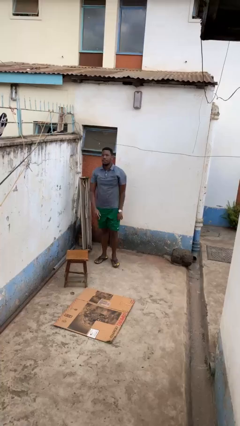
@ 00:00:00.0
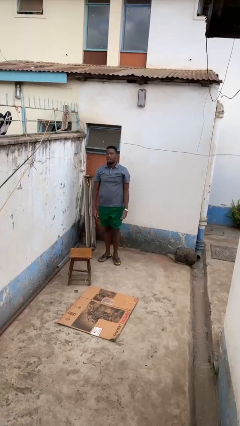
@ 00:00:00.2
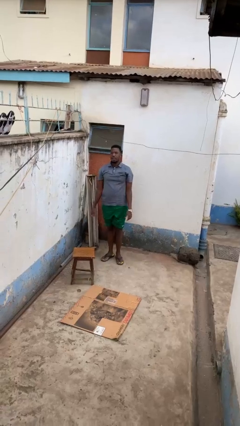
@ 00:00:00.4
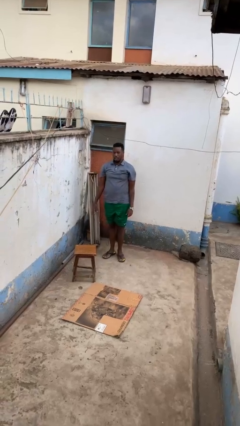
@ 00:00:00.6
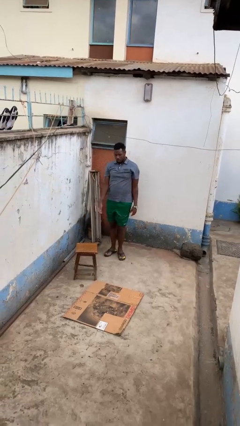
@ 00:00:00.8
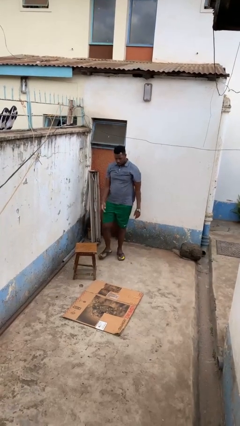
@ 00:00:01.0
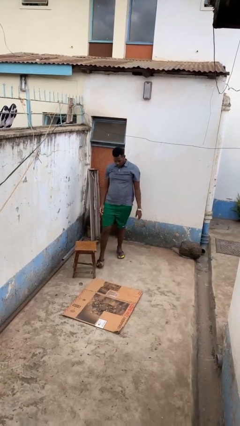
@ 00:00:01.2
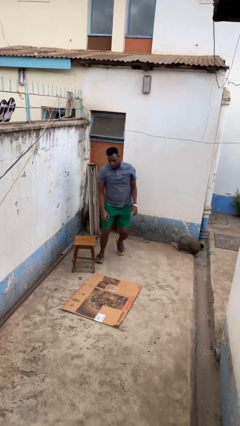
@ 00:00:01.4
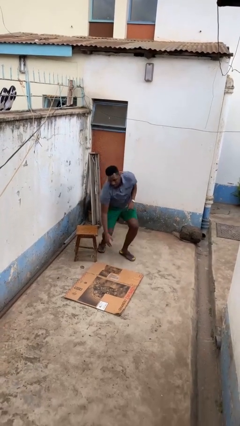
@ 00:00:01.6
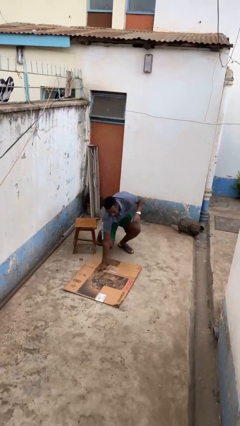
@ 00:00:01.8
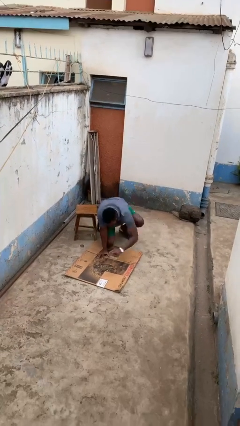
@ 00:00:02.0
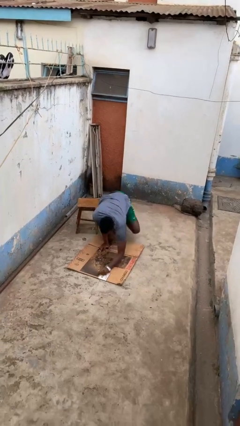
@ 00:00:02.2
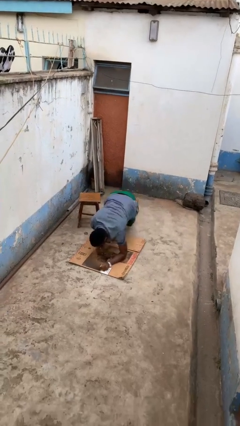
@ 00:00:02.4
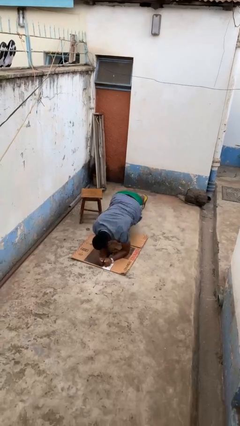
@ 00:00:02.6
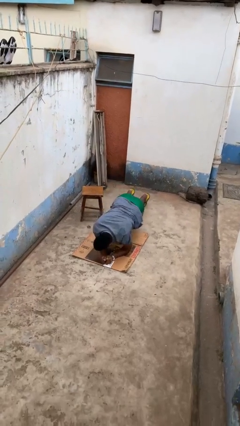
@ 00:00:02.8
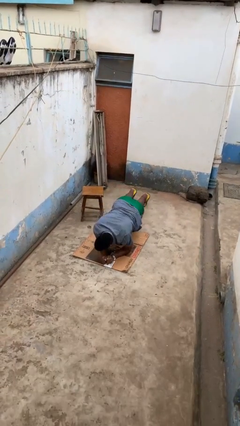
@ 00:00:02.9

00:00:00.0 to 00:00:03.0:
person trips on object on floor

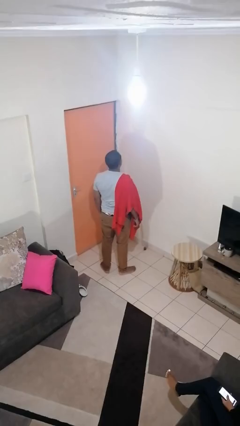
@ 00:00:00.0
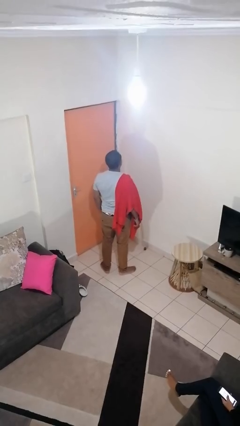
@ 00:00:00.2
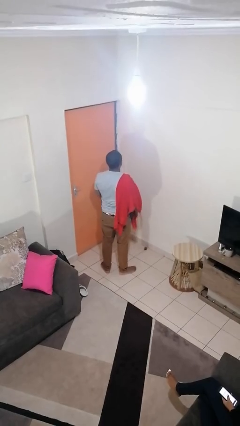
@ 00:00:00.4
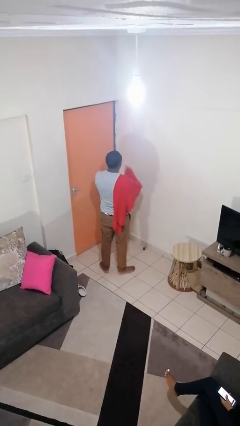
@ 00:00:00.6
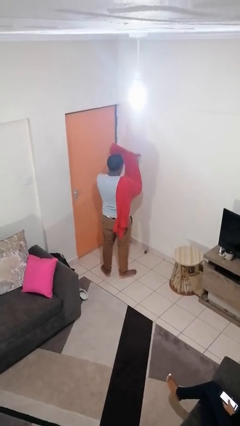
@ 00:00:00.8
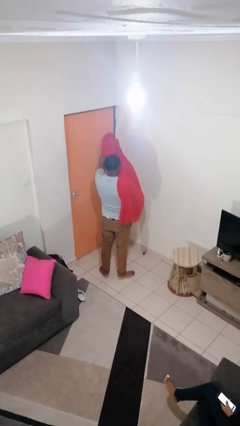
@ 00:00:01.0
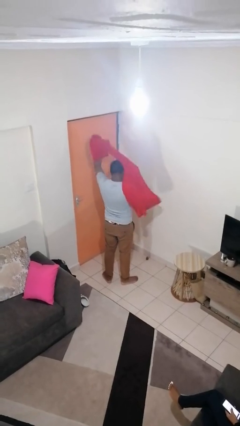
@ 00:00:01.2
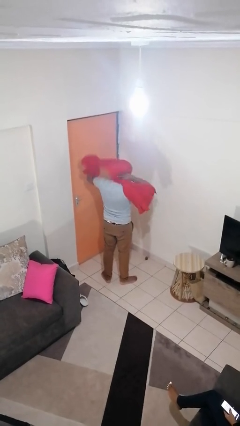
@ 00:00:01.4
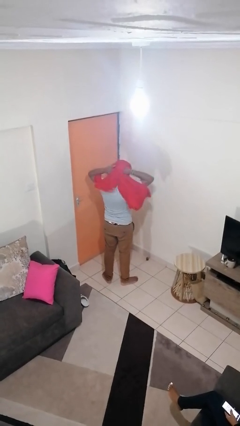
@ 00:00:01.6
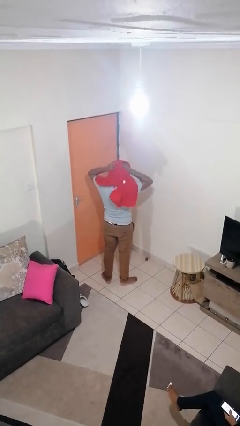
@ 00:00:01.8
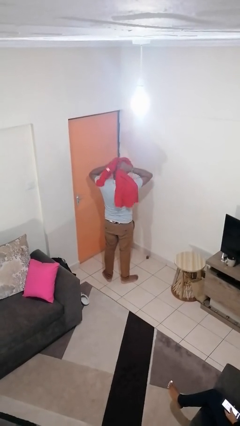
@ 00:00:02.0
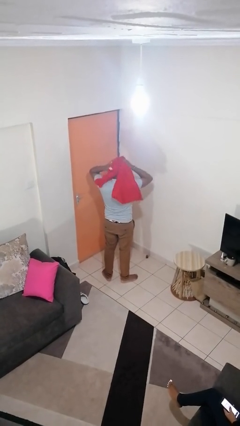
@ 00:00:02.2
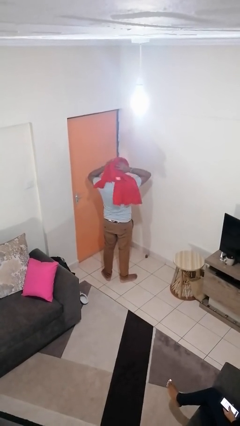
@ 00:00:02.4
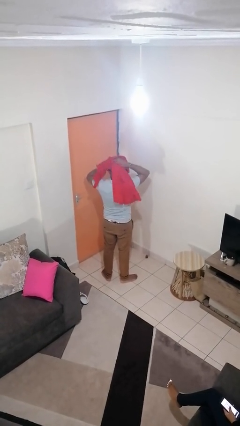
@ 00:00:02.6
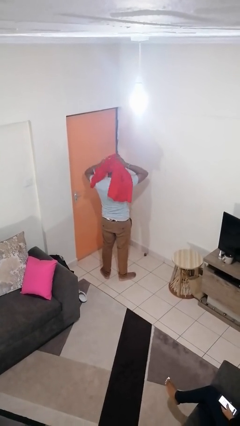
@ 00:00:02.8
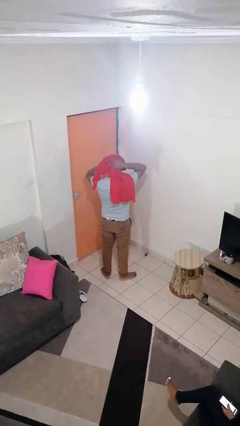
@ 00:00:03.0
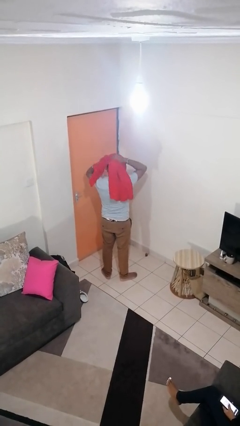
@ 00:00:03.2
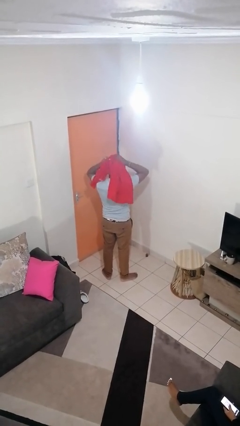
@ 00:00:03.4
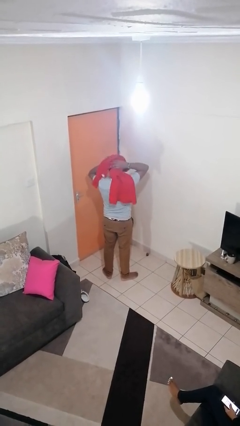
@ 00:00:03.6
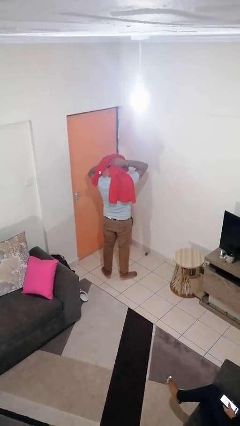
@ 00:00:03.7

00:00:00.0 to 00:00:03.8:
person dries hair with towel

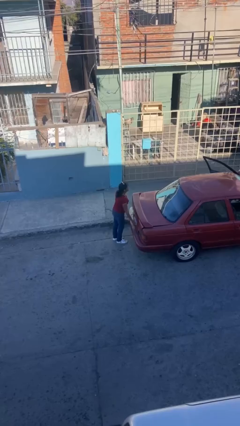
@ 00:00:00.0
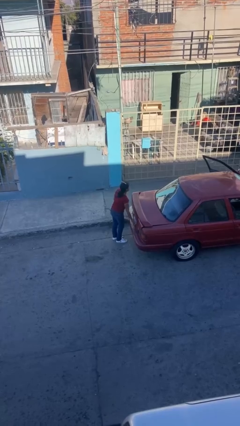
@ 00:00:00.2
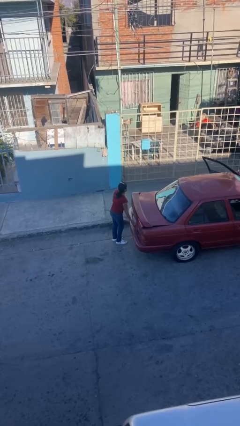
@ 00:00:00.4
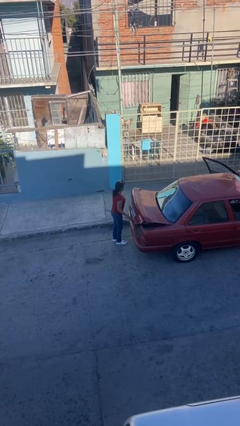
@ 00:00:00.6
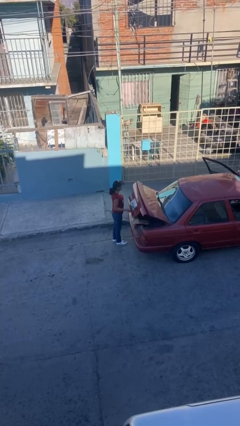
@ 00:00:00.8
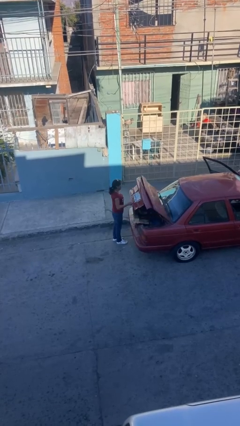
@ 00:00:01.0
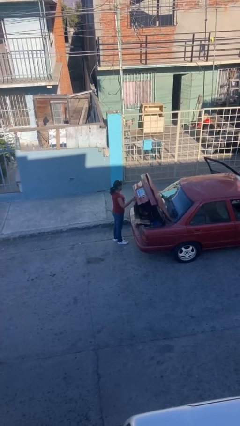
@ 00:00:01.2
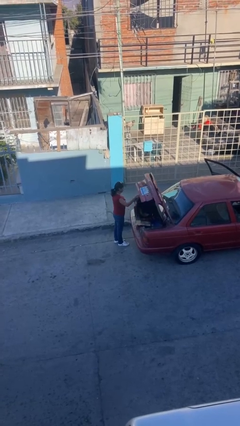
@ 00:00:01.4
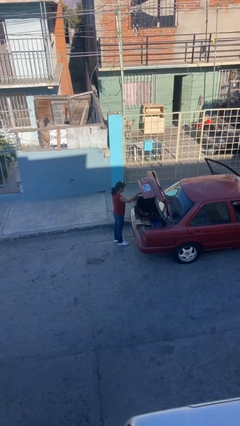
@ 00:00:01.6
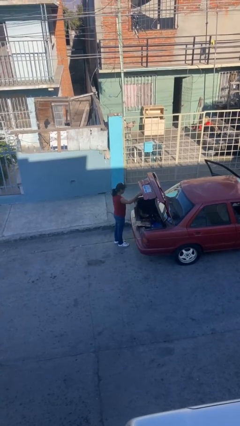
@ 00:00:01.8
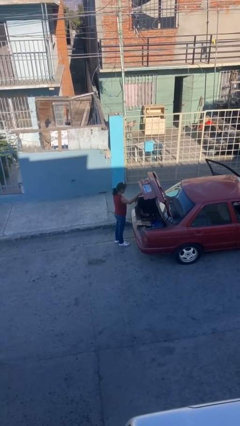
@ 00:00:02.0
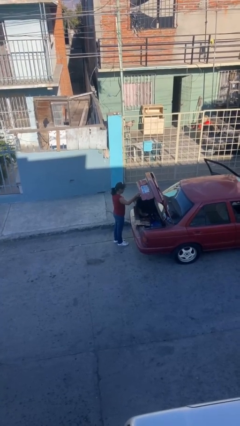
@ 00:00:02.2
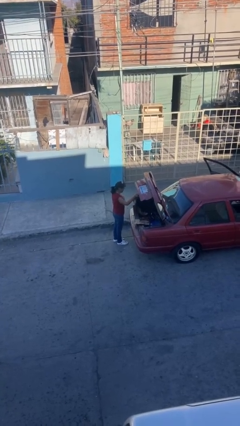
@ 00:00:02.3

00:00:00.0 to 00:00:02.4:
person opens car trunk

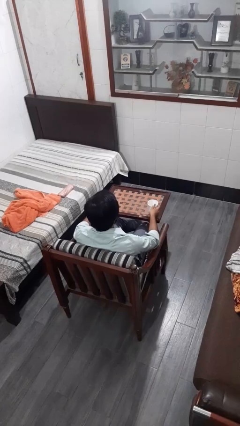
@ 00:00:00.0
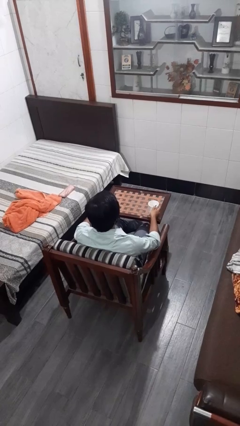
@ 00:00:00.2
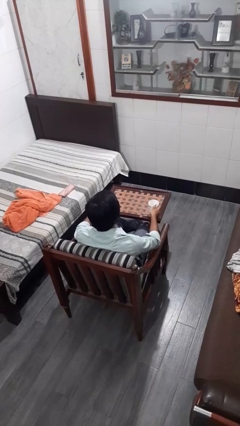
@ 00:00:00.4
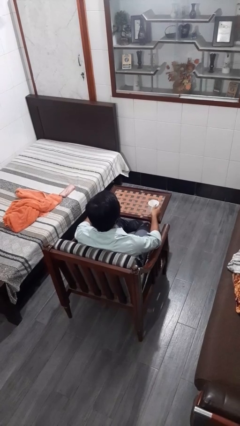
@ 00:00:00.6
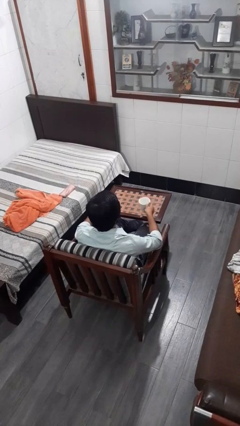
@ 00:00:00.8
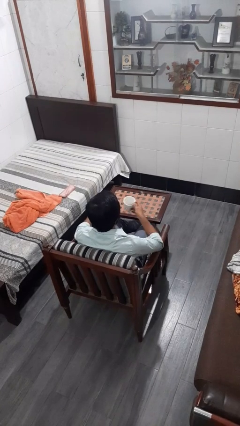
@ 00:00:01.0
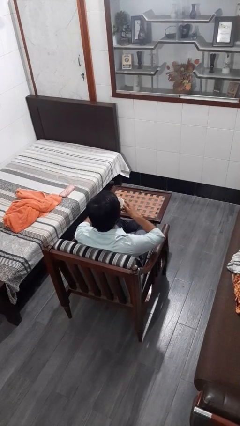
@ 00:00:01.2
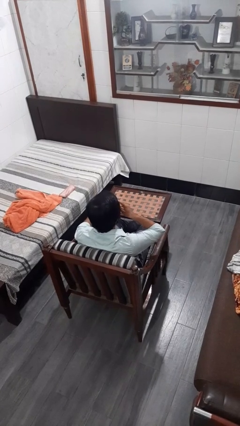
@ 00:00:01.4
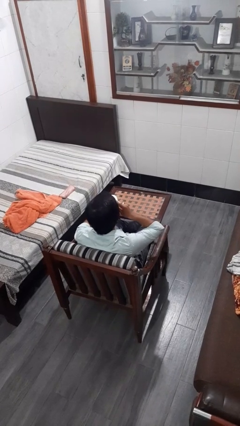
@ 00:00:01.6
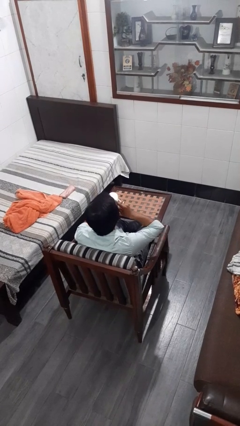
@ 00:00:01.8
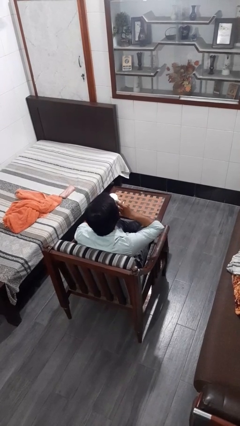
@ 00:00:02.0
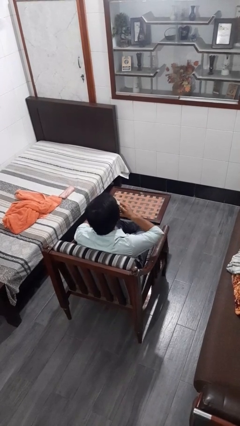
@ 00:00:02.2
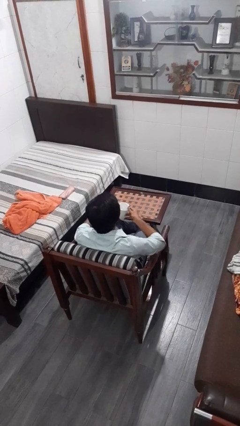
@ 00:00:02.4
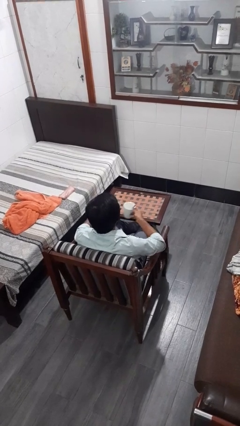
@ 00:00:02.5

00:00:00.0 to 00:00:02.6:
person drinks from mug

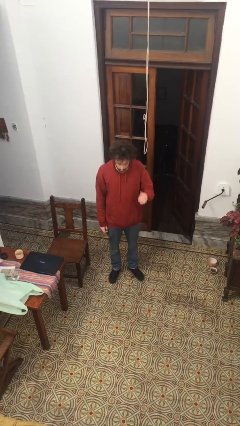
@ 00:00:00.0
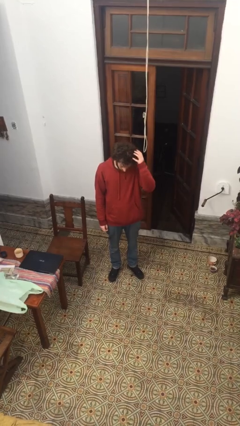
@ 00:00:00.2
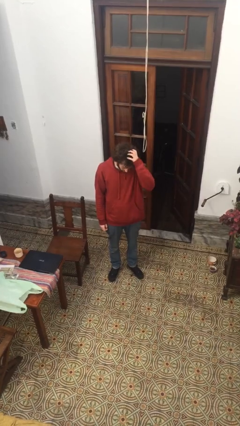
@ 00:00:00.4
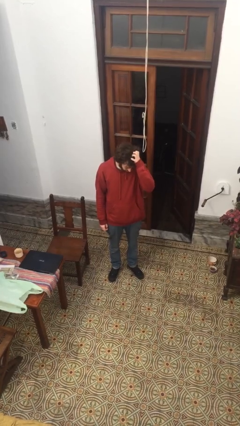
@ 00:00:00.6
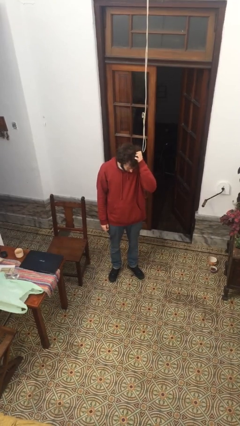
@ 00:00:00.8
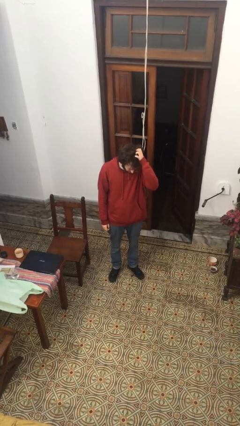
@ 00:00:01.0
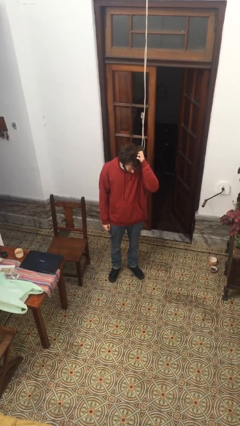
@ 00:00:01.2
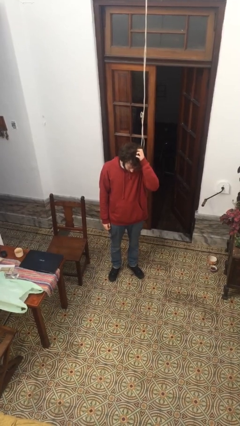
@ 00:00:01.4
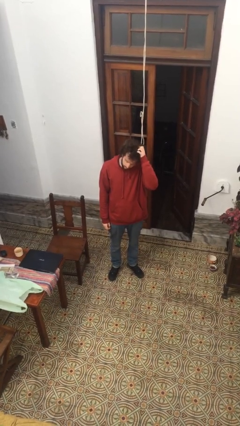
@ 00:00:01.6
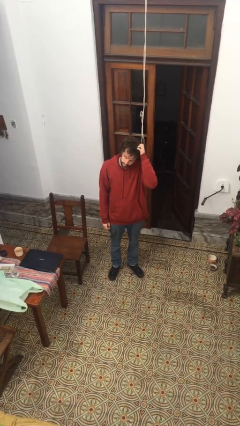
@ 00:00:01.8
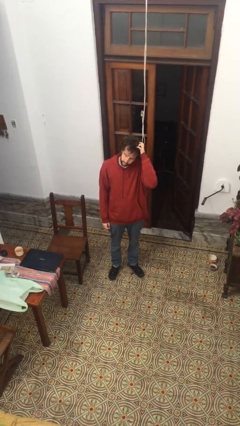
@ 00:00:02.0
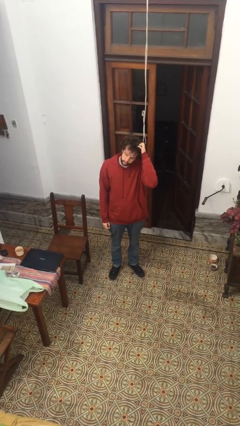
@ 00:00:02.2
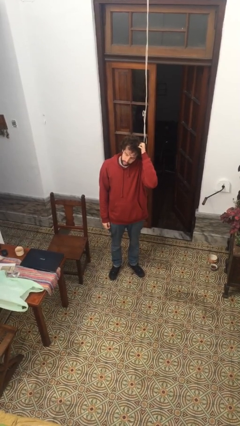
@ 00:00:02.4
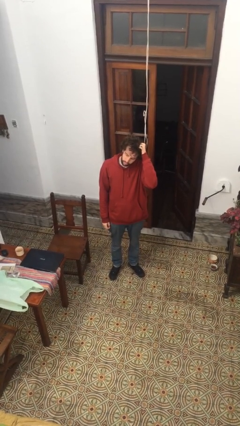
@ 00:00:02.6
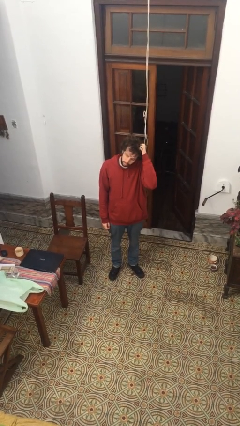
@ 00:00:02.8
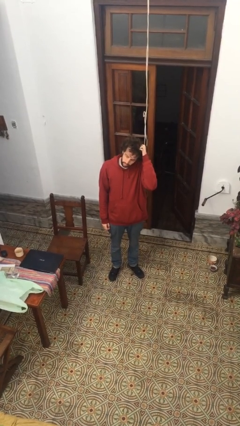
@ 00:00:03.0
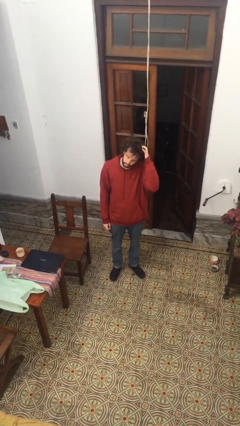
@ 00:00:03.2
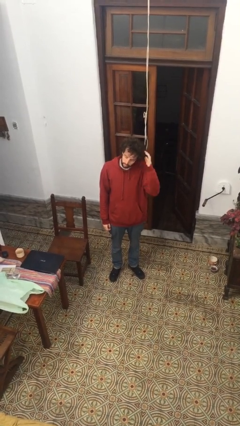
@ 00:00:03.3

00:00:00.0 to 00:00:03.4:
person scratches face

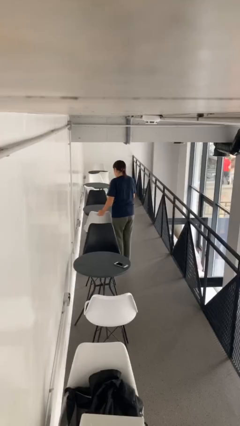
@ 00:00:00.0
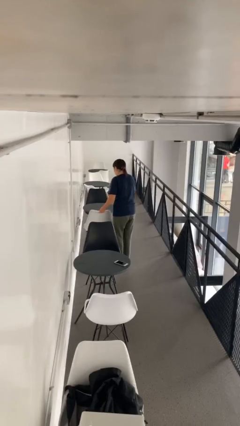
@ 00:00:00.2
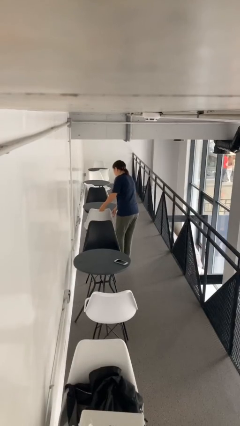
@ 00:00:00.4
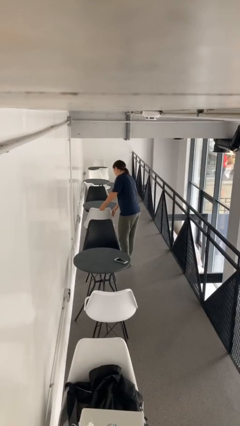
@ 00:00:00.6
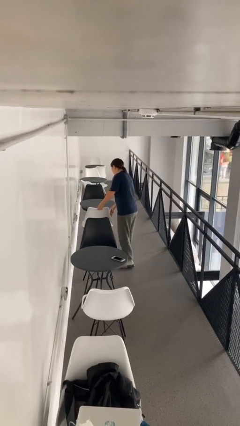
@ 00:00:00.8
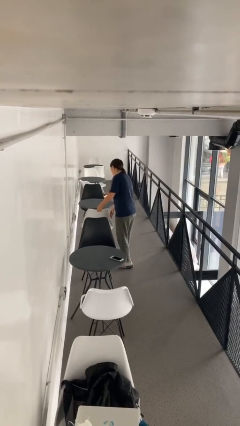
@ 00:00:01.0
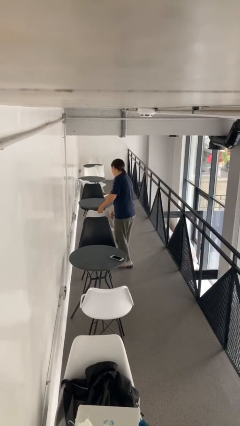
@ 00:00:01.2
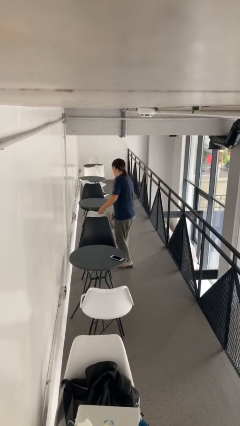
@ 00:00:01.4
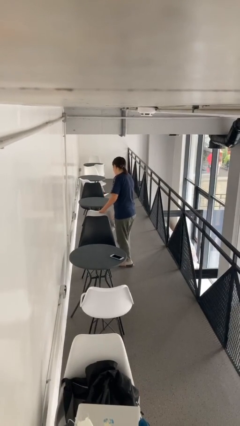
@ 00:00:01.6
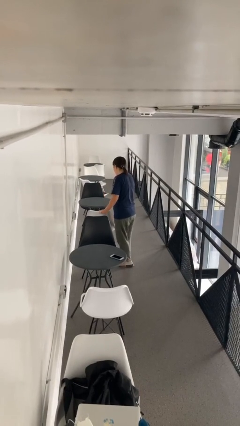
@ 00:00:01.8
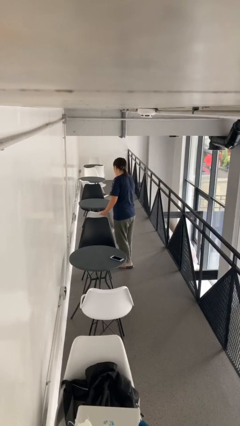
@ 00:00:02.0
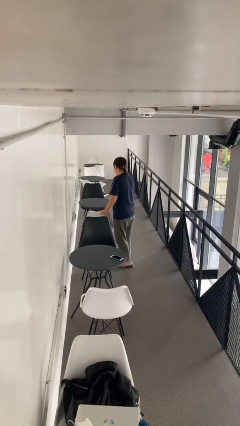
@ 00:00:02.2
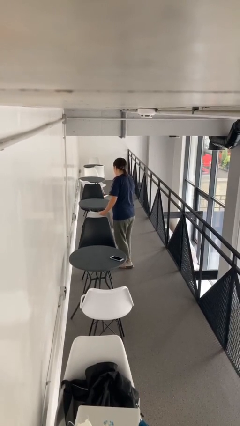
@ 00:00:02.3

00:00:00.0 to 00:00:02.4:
person pulls out chair
